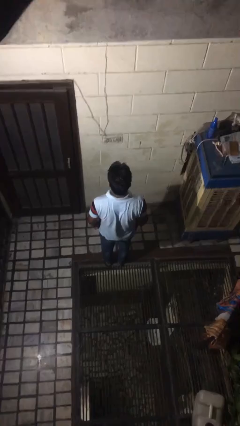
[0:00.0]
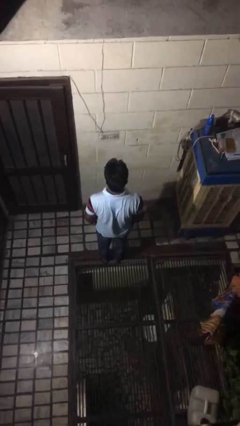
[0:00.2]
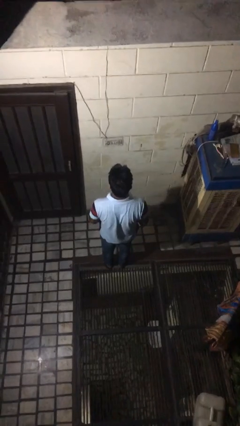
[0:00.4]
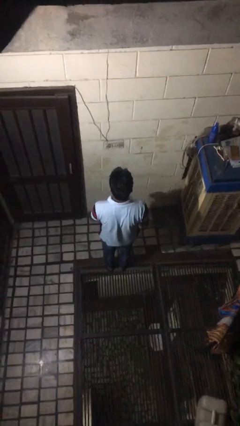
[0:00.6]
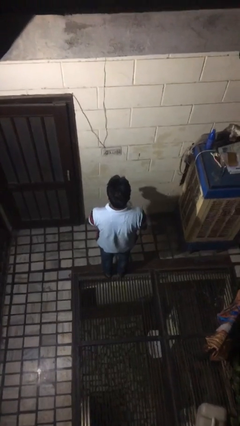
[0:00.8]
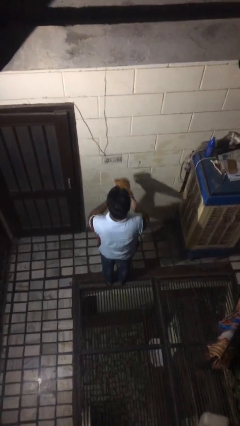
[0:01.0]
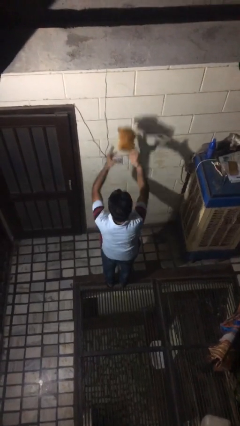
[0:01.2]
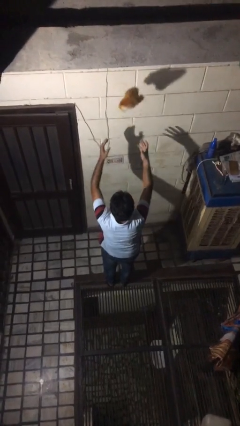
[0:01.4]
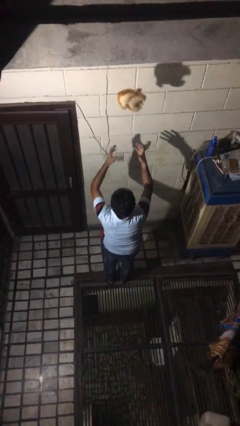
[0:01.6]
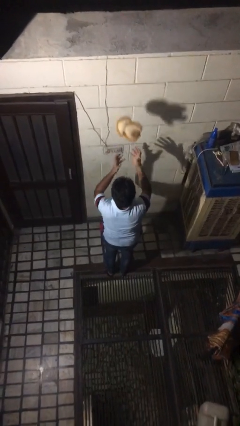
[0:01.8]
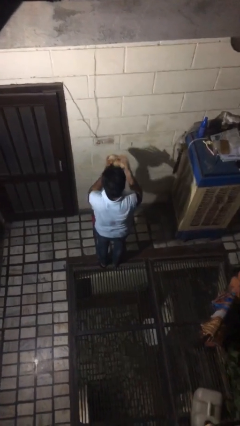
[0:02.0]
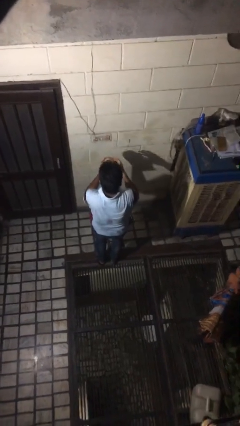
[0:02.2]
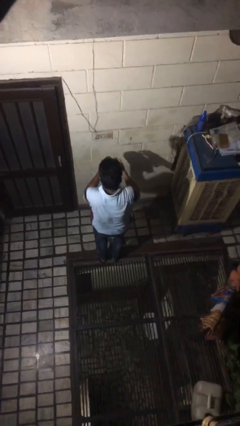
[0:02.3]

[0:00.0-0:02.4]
person drops object

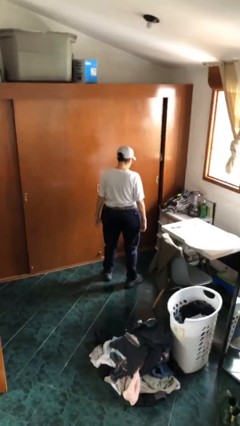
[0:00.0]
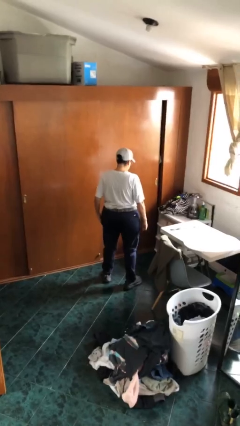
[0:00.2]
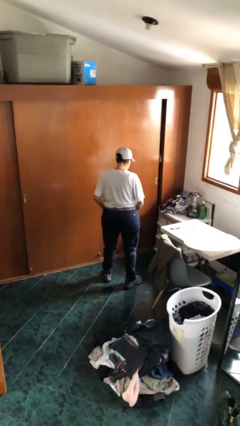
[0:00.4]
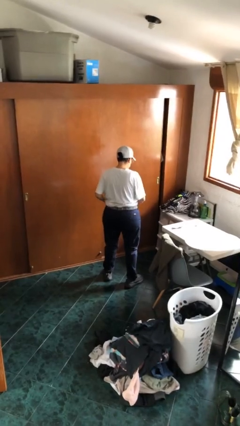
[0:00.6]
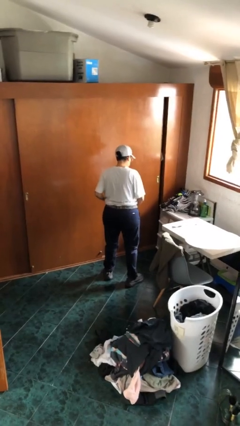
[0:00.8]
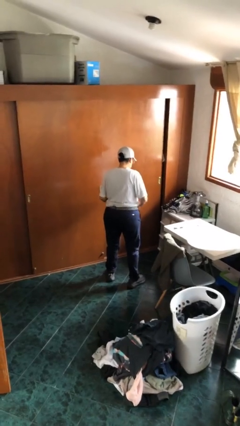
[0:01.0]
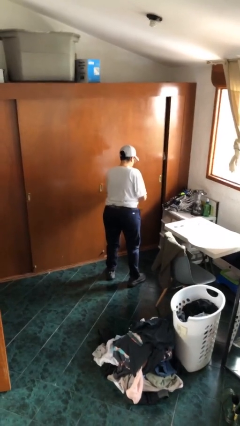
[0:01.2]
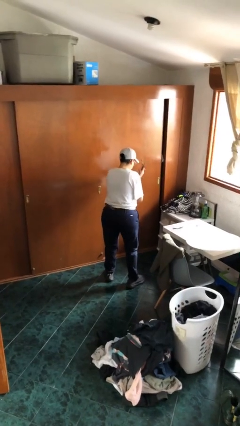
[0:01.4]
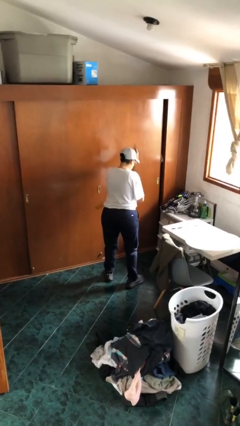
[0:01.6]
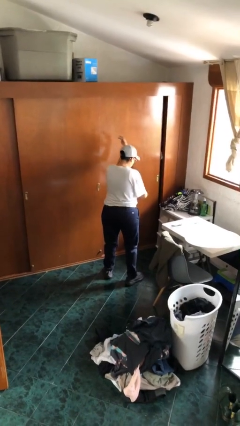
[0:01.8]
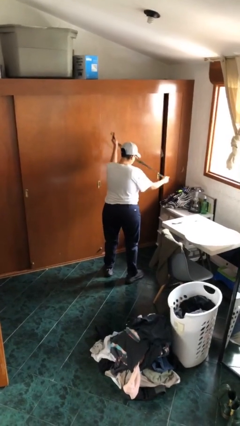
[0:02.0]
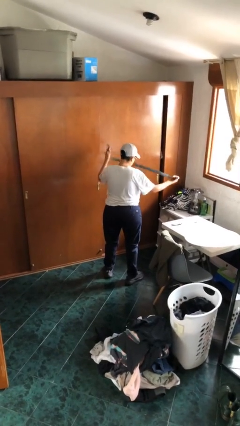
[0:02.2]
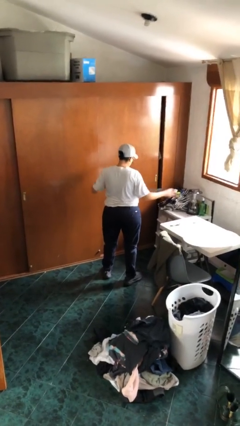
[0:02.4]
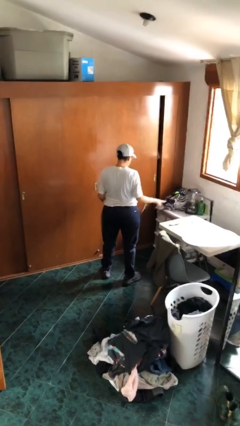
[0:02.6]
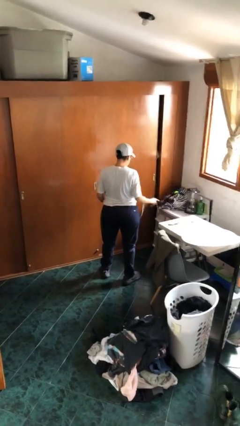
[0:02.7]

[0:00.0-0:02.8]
person takes off belt

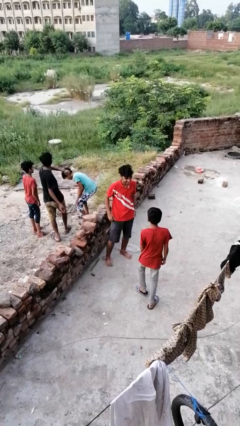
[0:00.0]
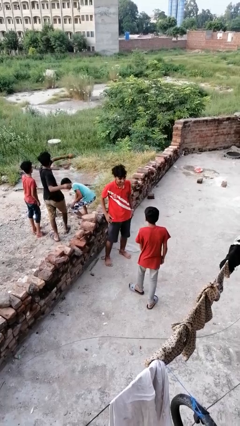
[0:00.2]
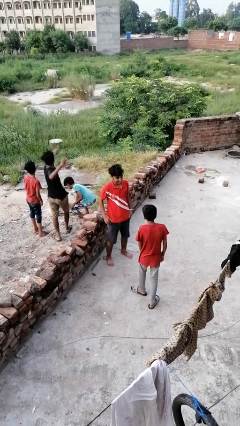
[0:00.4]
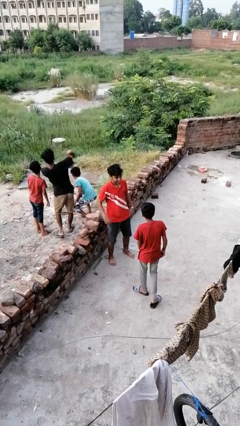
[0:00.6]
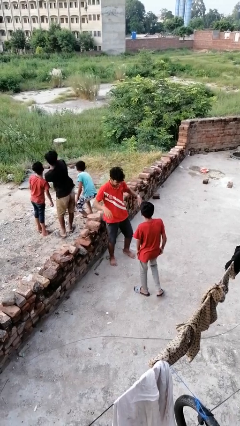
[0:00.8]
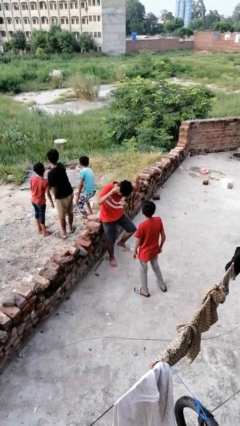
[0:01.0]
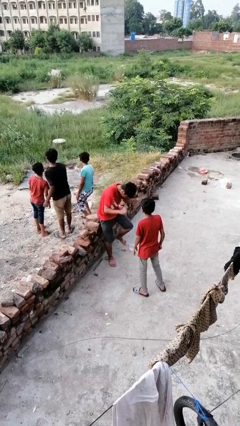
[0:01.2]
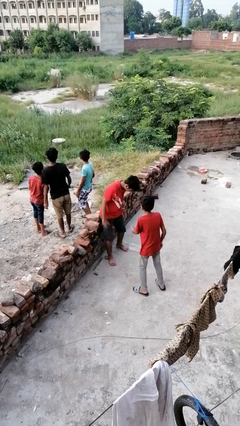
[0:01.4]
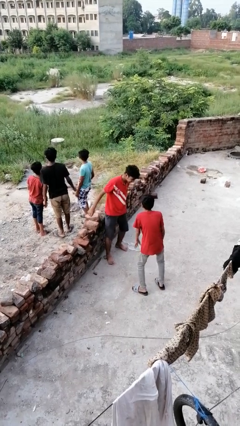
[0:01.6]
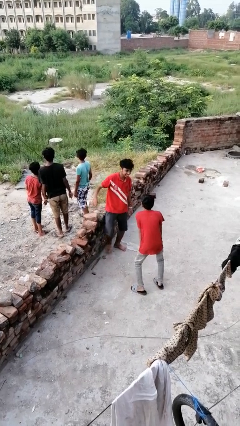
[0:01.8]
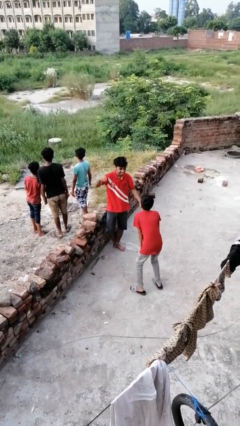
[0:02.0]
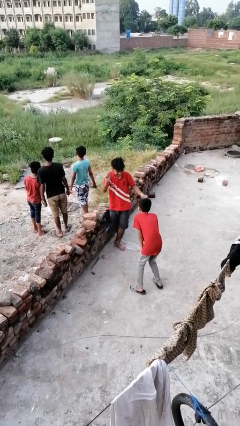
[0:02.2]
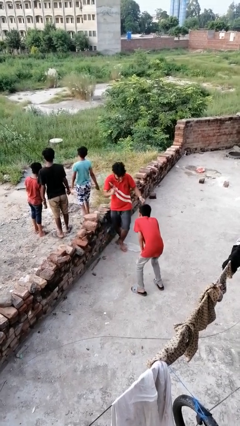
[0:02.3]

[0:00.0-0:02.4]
person laughs with person

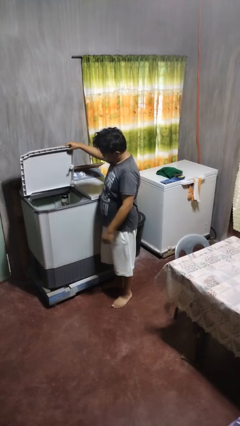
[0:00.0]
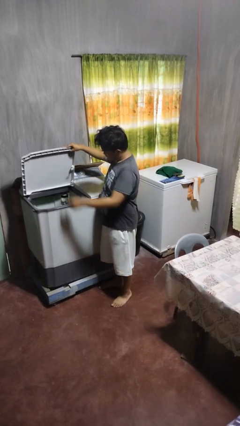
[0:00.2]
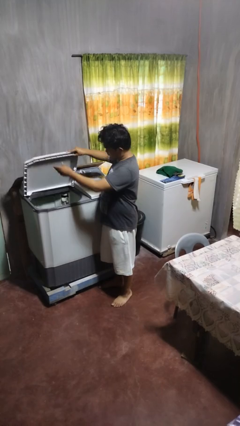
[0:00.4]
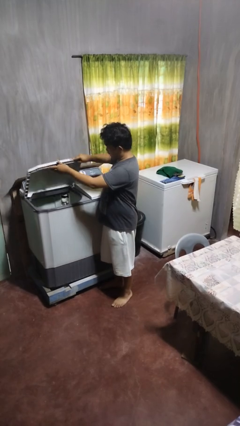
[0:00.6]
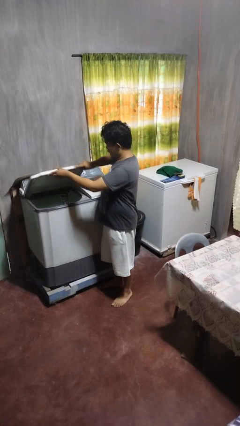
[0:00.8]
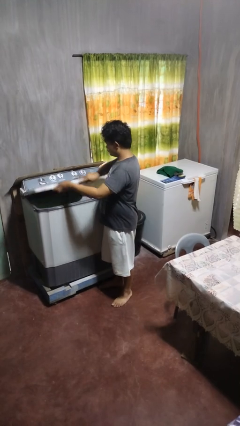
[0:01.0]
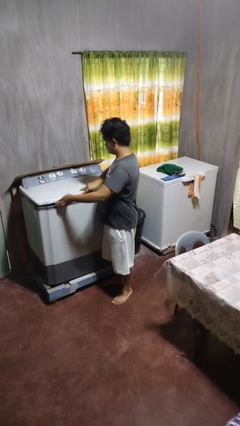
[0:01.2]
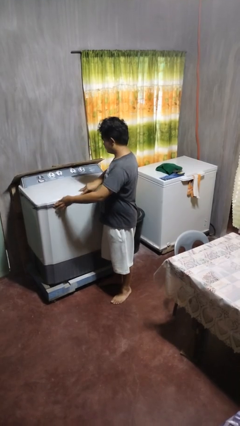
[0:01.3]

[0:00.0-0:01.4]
person closes clothes washer

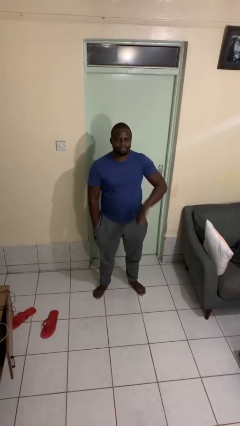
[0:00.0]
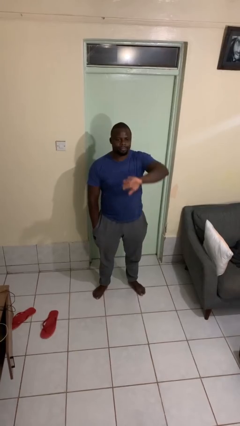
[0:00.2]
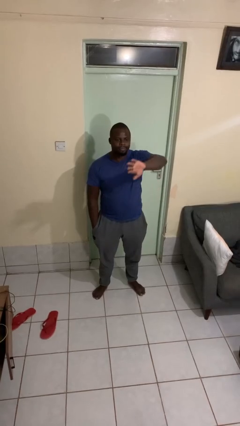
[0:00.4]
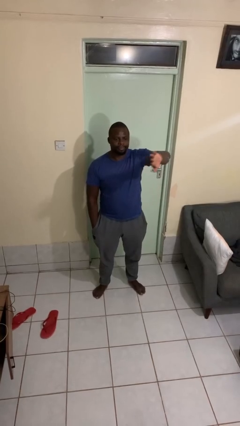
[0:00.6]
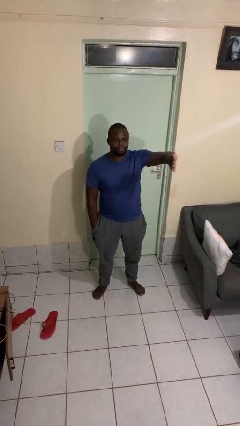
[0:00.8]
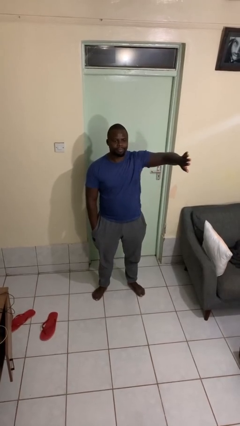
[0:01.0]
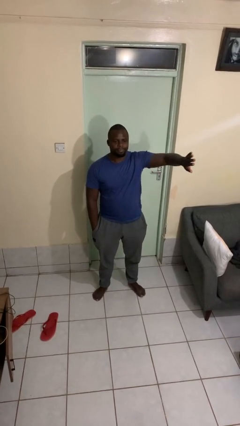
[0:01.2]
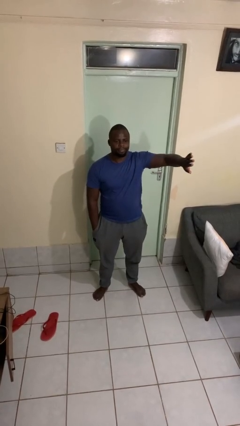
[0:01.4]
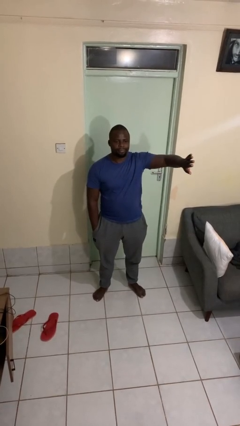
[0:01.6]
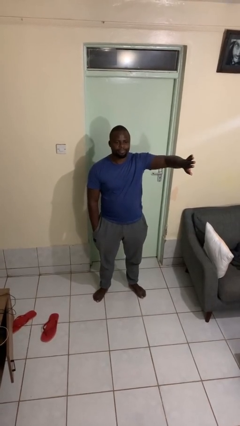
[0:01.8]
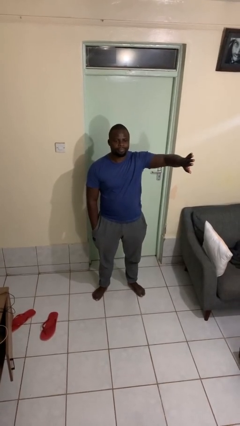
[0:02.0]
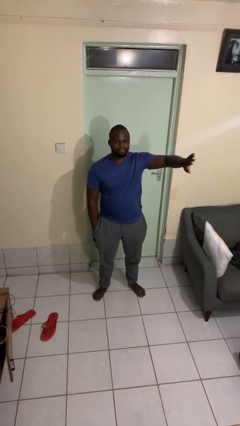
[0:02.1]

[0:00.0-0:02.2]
person gestures swipe left

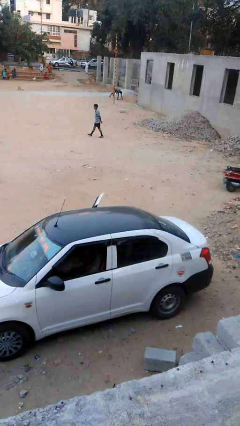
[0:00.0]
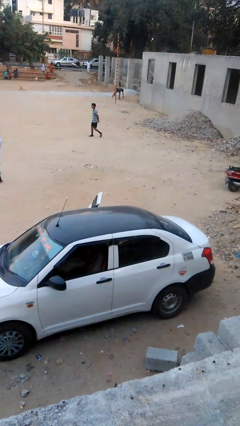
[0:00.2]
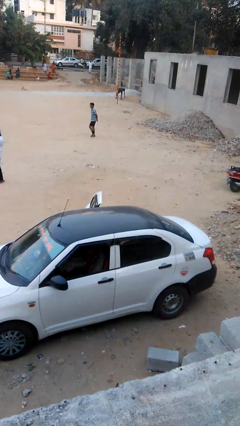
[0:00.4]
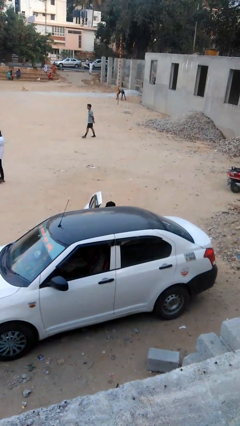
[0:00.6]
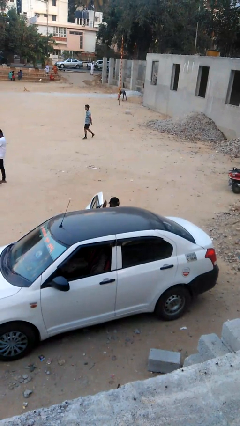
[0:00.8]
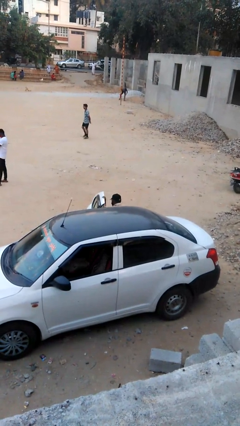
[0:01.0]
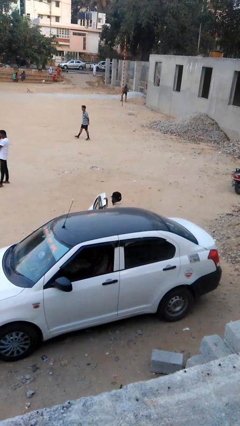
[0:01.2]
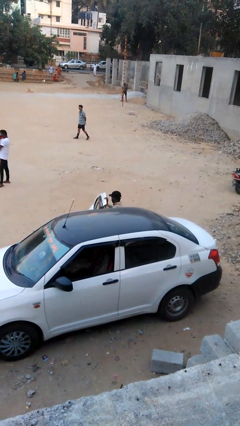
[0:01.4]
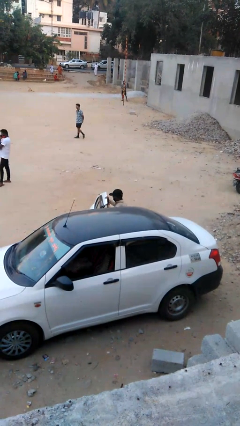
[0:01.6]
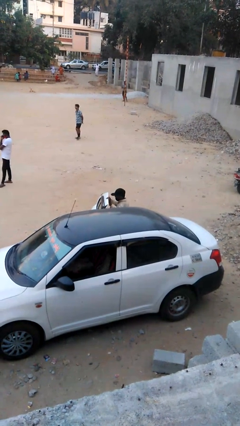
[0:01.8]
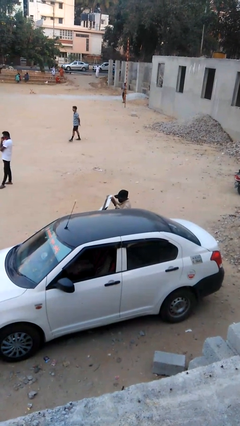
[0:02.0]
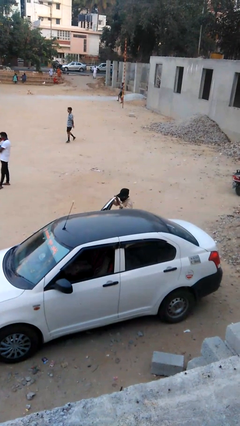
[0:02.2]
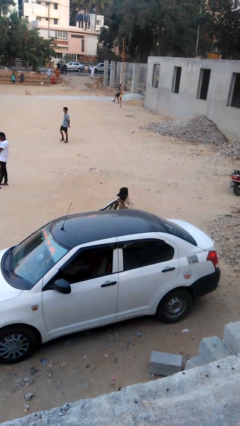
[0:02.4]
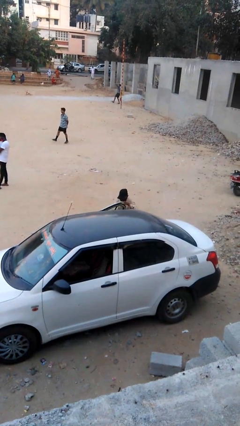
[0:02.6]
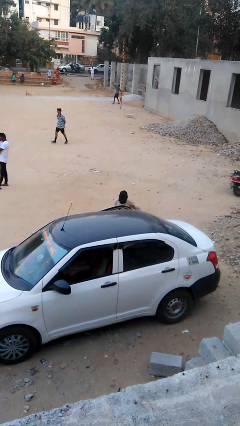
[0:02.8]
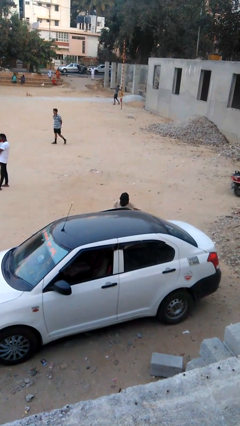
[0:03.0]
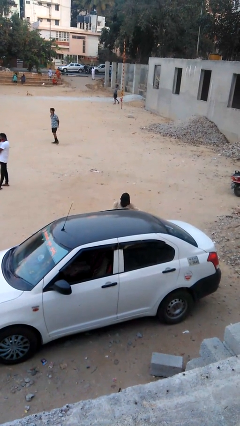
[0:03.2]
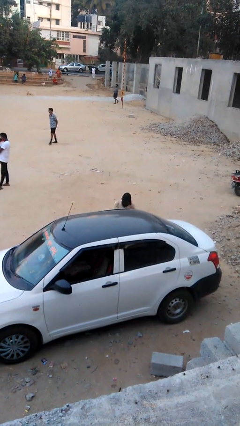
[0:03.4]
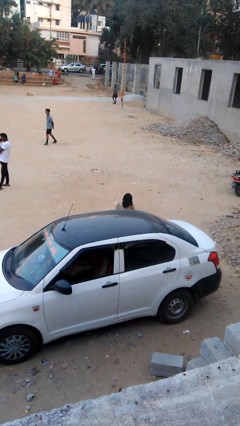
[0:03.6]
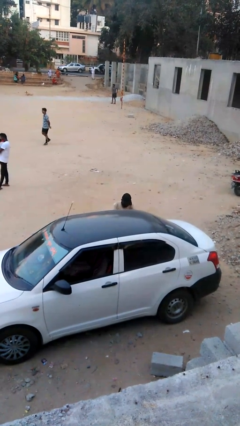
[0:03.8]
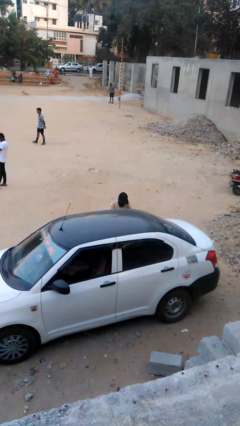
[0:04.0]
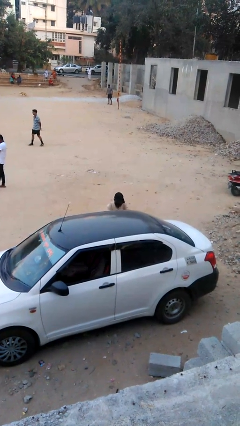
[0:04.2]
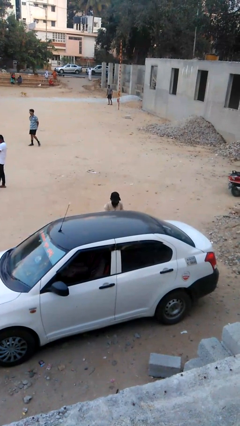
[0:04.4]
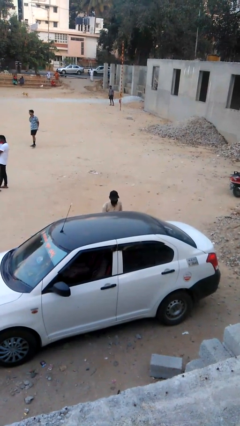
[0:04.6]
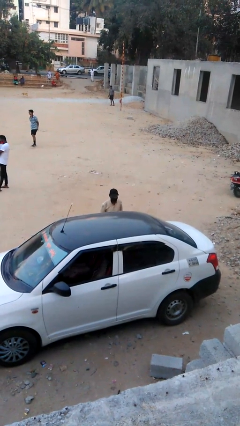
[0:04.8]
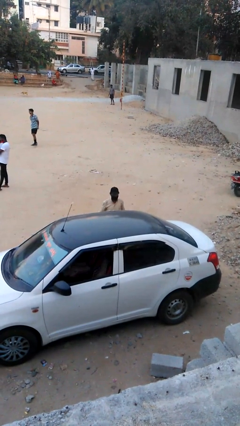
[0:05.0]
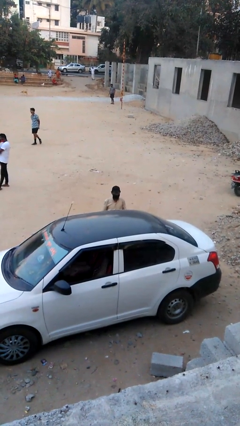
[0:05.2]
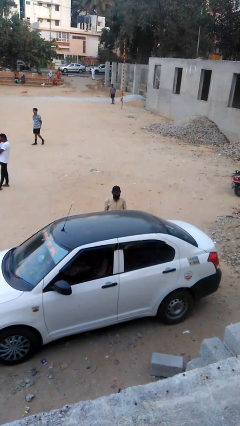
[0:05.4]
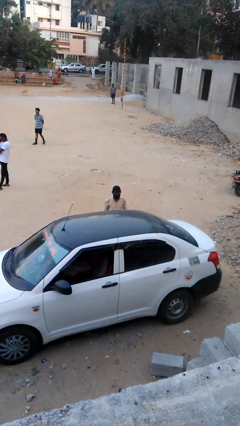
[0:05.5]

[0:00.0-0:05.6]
person exits car

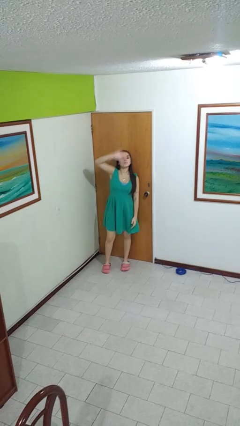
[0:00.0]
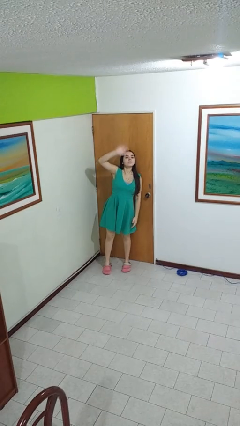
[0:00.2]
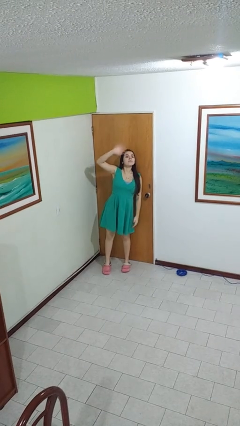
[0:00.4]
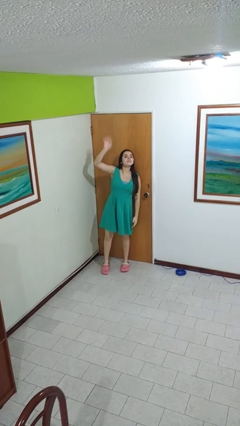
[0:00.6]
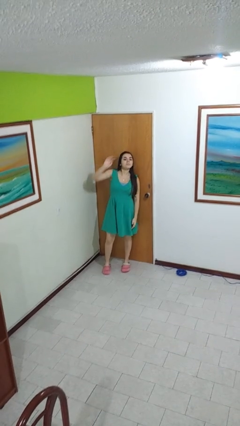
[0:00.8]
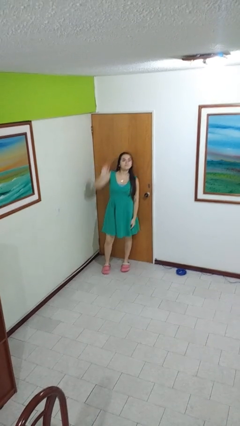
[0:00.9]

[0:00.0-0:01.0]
person waves at person
